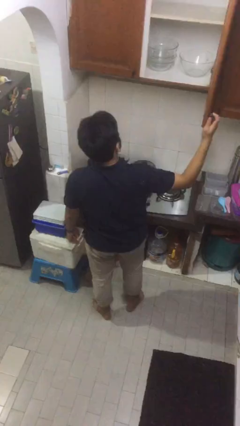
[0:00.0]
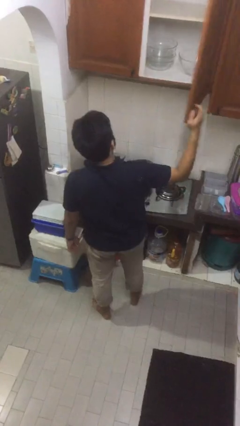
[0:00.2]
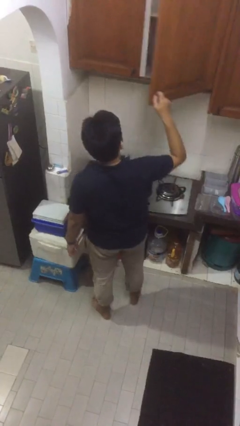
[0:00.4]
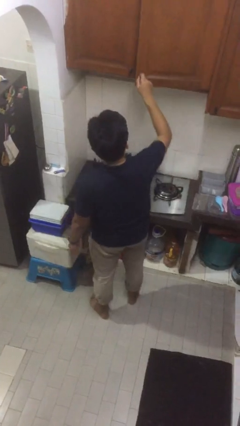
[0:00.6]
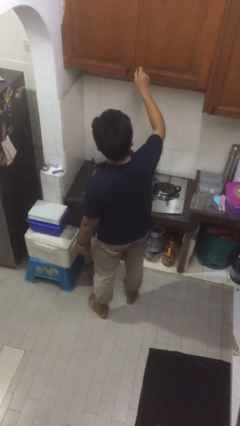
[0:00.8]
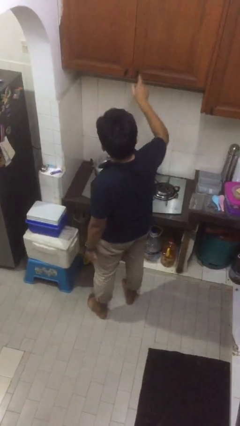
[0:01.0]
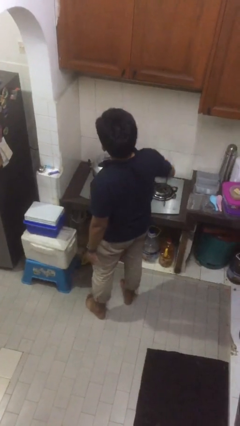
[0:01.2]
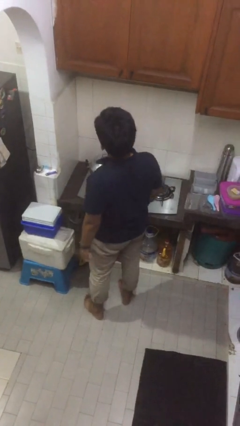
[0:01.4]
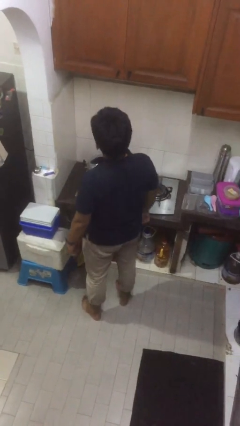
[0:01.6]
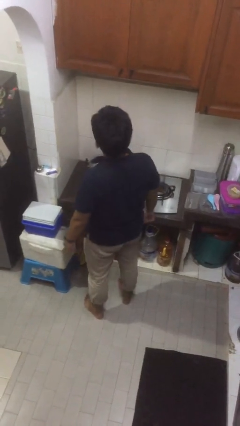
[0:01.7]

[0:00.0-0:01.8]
person closes cabinet

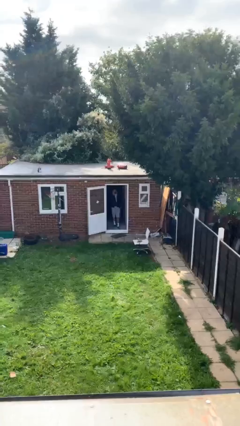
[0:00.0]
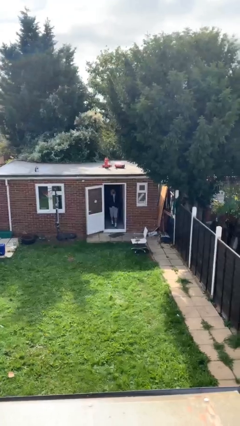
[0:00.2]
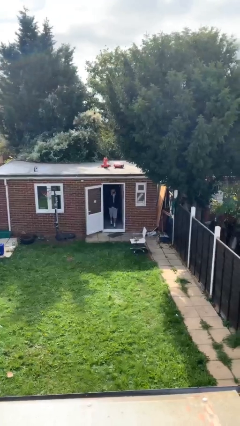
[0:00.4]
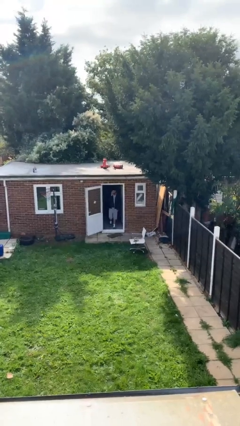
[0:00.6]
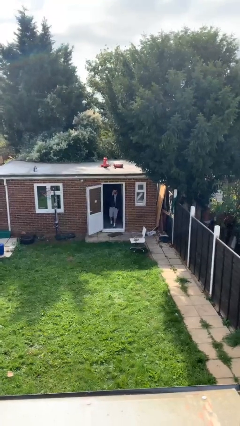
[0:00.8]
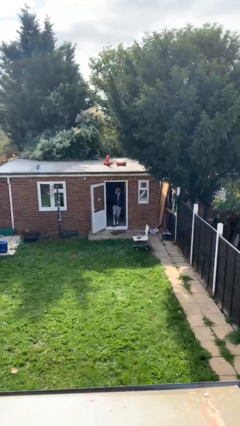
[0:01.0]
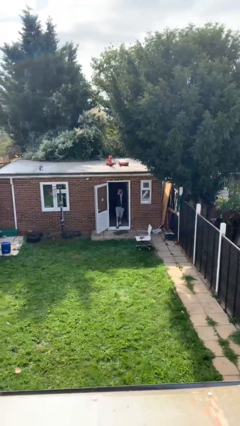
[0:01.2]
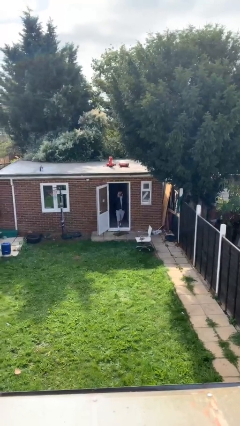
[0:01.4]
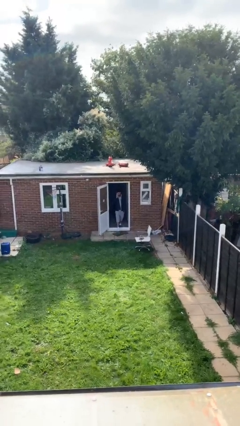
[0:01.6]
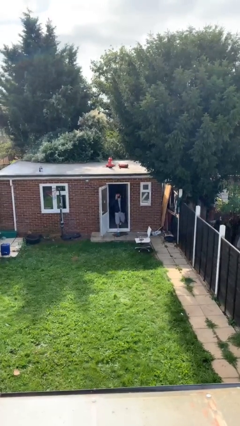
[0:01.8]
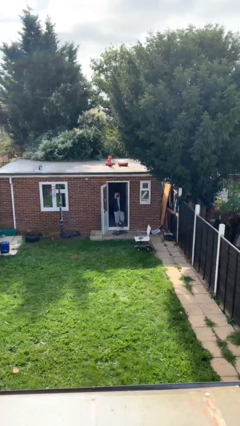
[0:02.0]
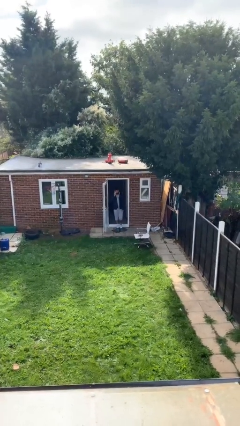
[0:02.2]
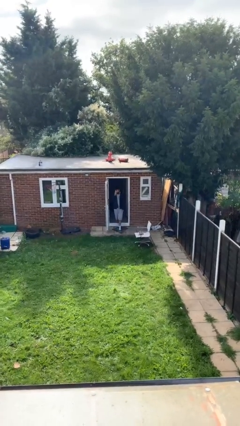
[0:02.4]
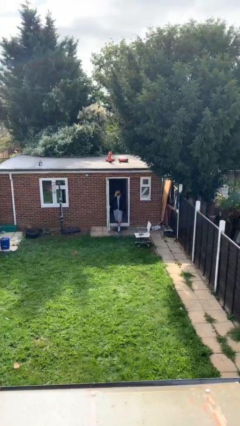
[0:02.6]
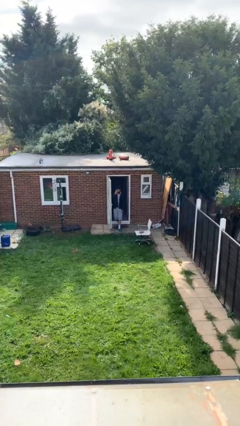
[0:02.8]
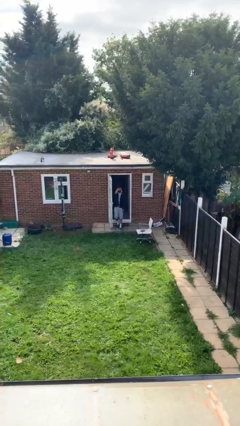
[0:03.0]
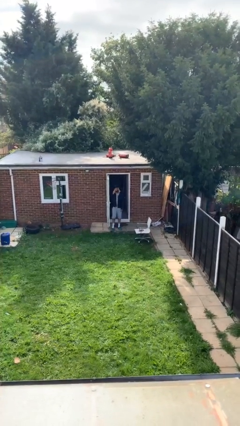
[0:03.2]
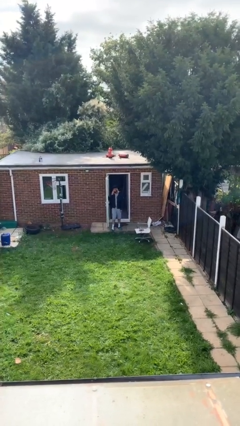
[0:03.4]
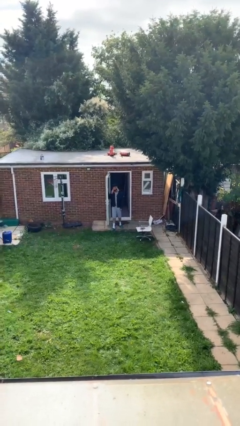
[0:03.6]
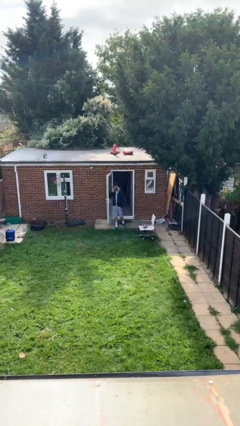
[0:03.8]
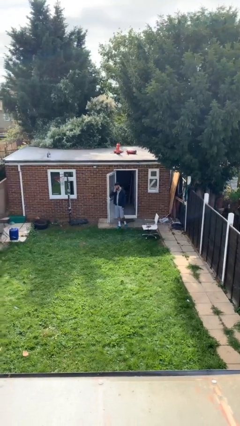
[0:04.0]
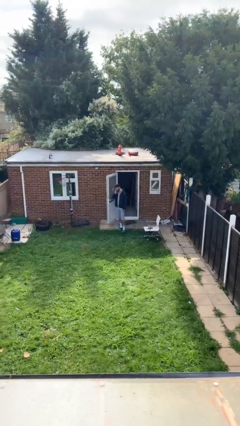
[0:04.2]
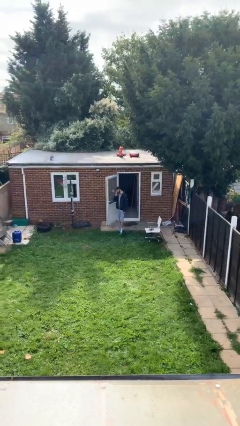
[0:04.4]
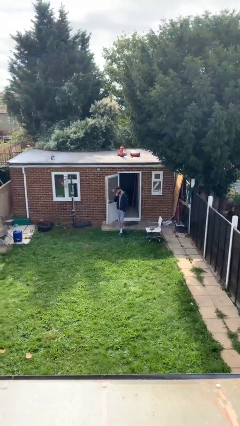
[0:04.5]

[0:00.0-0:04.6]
person enters scene through structure

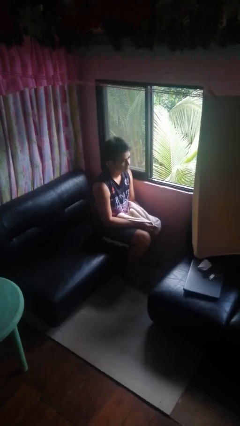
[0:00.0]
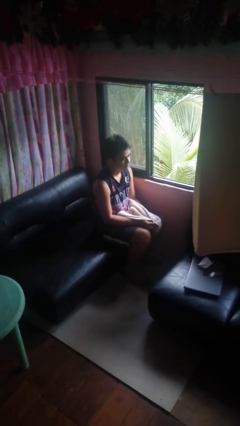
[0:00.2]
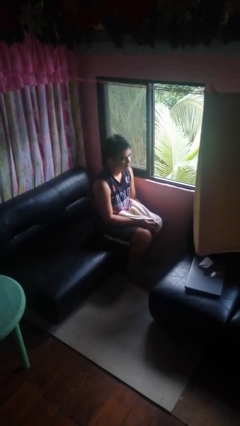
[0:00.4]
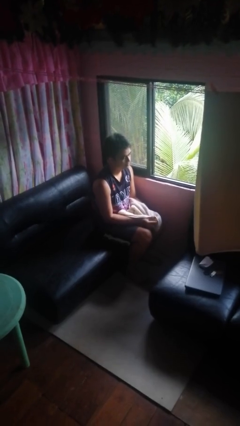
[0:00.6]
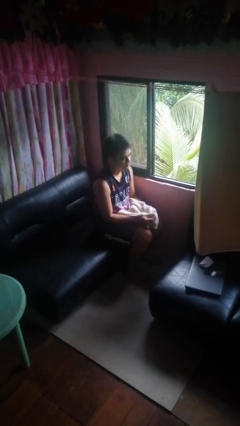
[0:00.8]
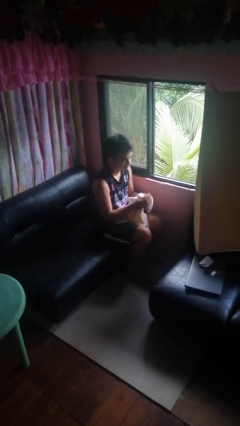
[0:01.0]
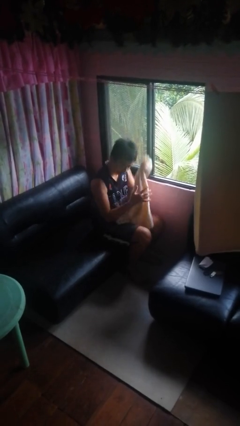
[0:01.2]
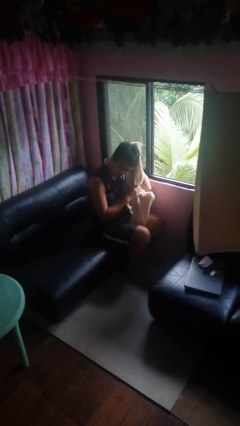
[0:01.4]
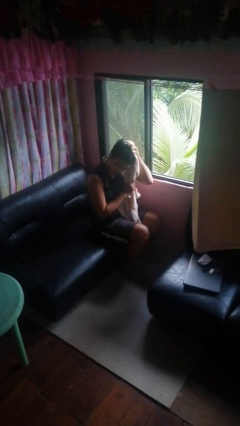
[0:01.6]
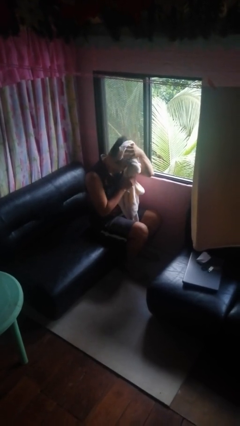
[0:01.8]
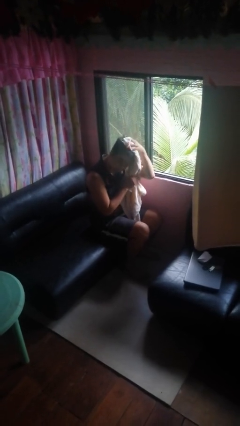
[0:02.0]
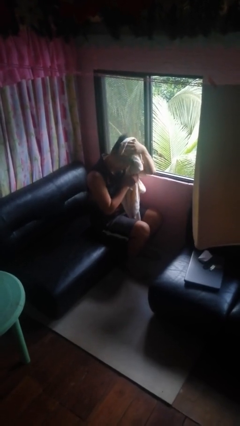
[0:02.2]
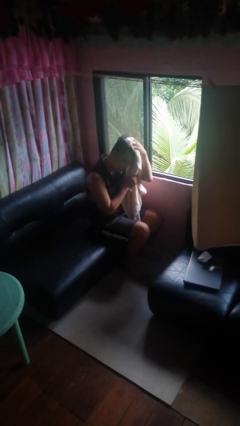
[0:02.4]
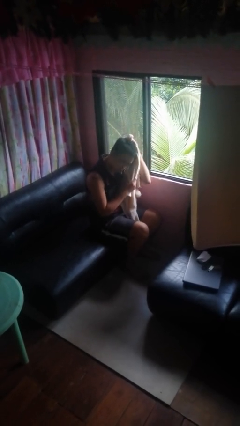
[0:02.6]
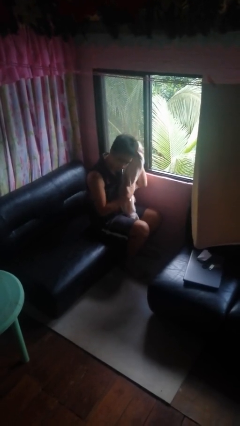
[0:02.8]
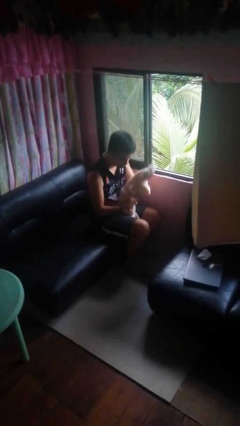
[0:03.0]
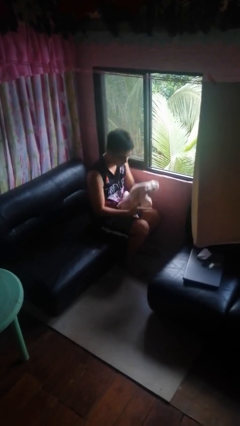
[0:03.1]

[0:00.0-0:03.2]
person dries hair with towel

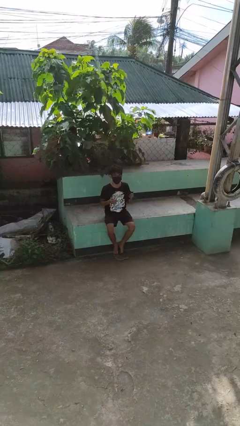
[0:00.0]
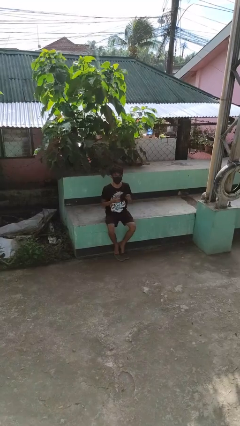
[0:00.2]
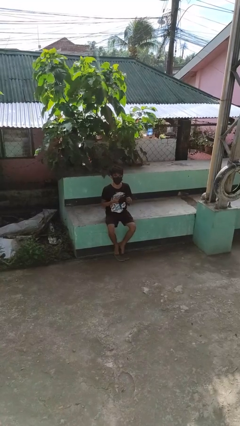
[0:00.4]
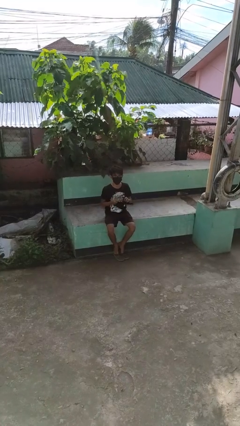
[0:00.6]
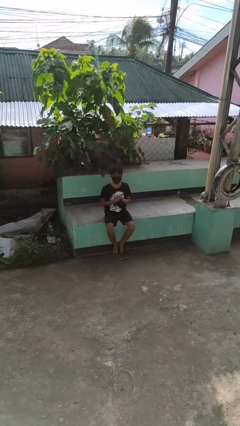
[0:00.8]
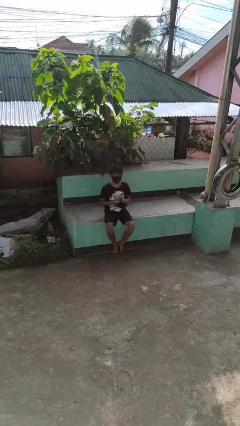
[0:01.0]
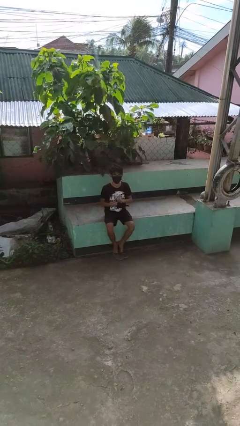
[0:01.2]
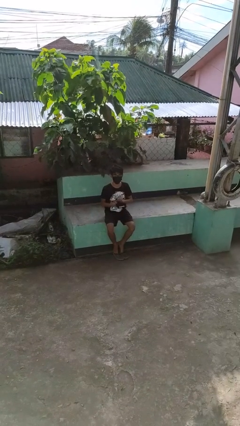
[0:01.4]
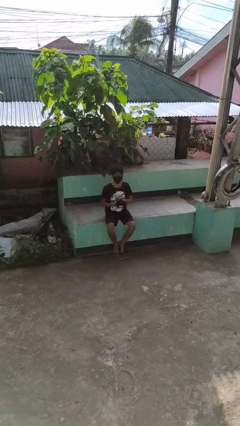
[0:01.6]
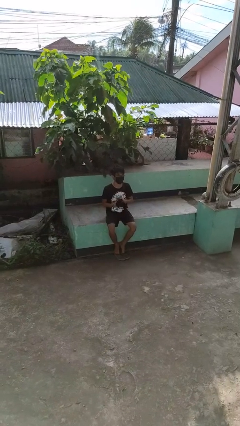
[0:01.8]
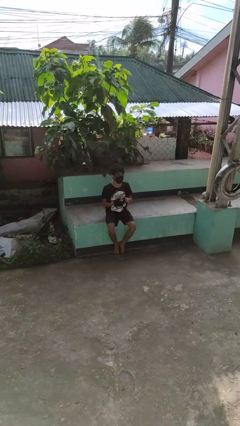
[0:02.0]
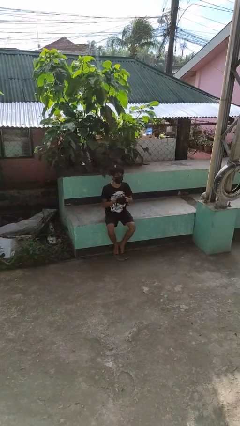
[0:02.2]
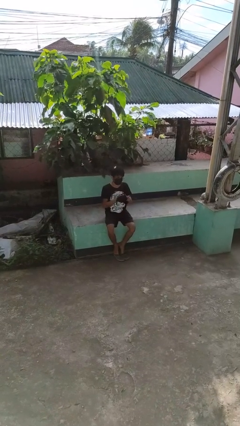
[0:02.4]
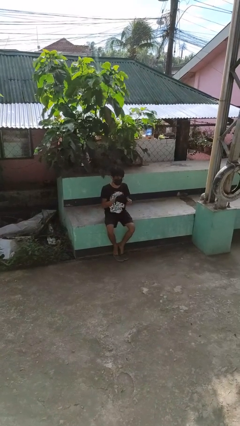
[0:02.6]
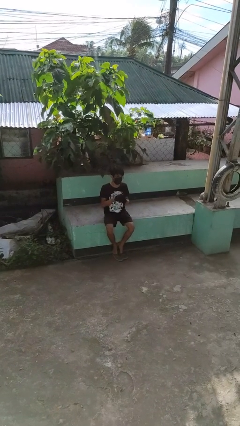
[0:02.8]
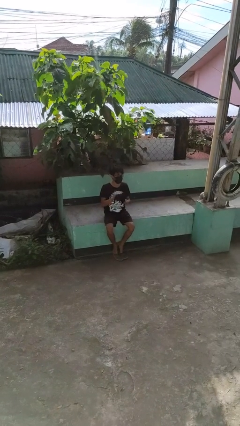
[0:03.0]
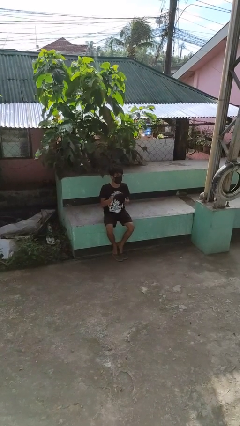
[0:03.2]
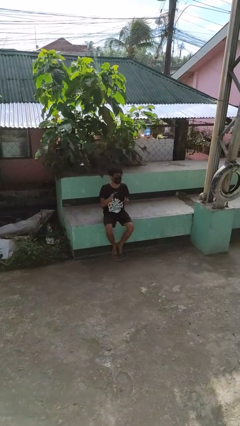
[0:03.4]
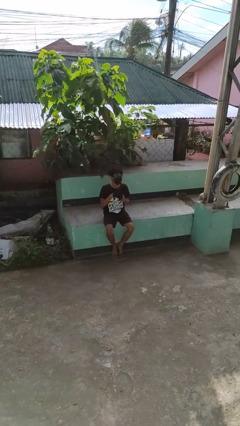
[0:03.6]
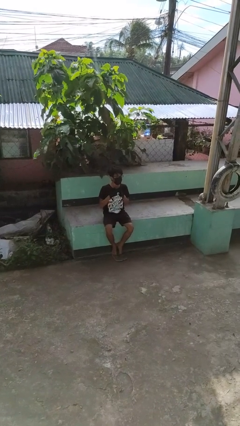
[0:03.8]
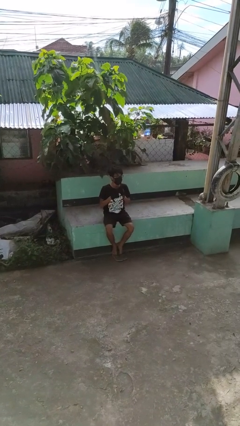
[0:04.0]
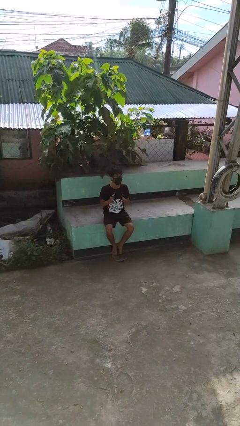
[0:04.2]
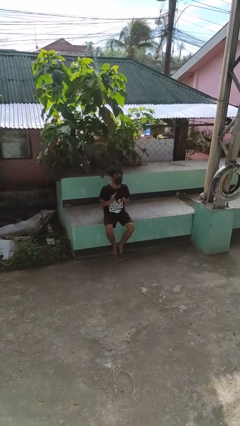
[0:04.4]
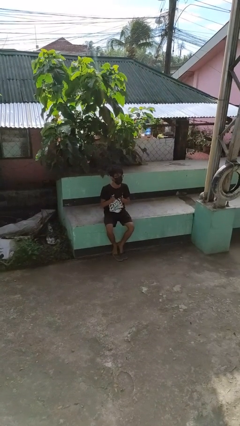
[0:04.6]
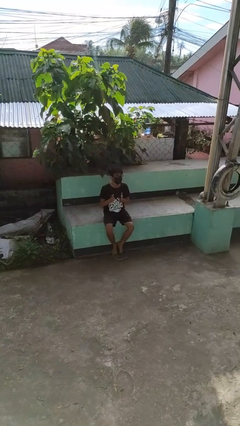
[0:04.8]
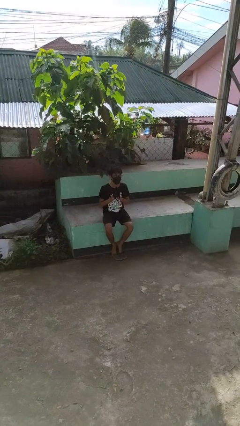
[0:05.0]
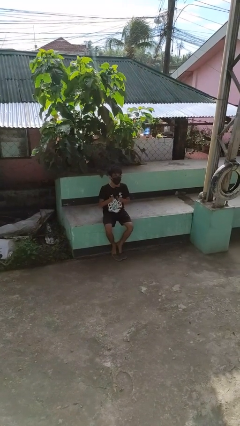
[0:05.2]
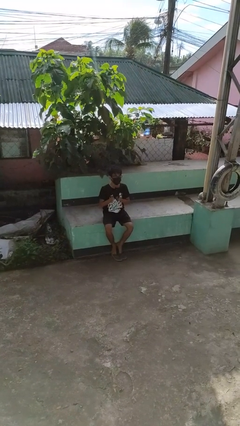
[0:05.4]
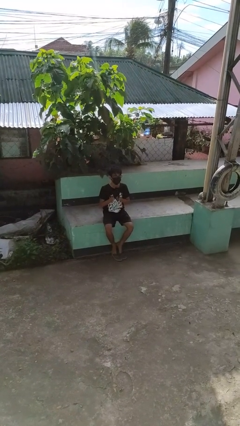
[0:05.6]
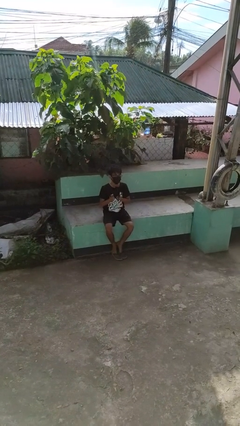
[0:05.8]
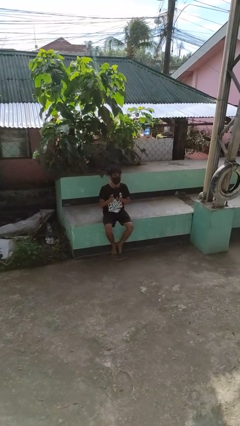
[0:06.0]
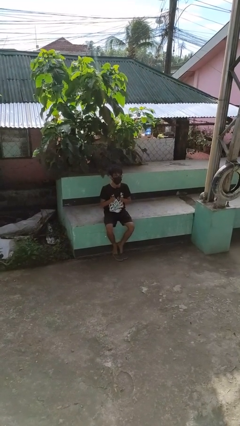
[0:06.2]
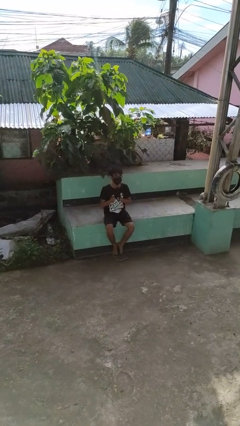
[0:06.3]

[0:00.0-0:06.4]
person puts on gloves

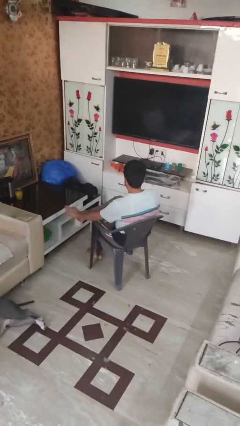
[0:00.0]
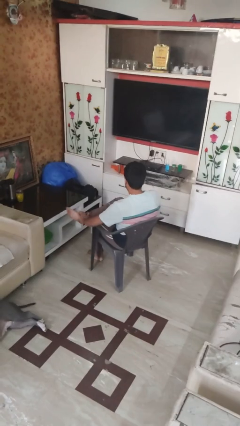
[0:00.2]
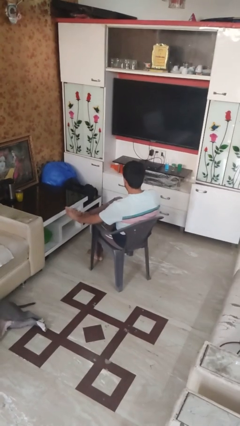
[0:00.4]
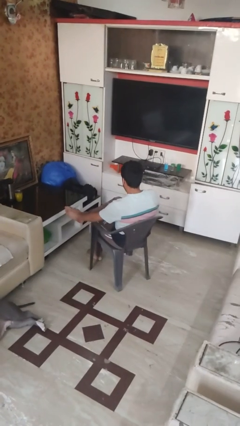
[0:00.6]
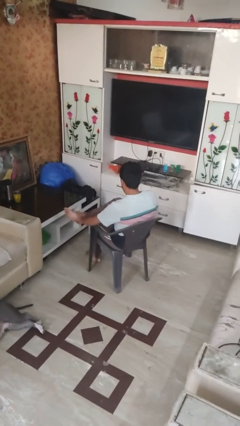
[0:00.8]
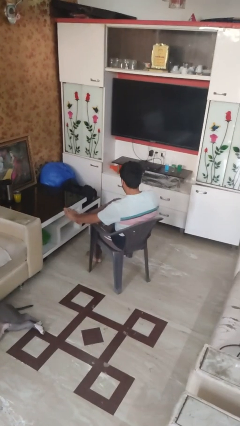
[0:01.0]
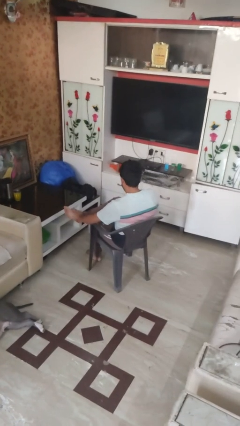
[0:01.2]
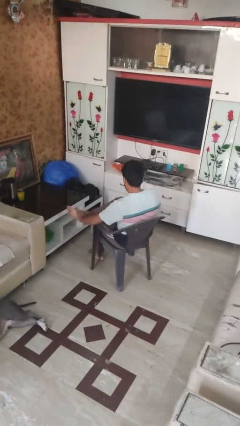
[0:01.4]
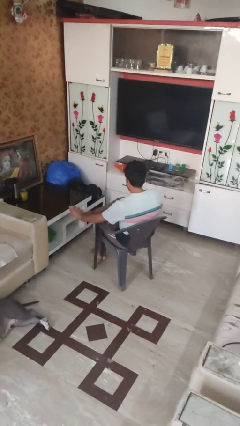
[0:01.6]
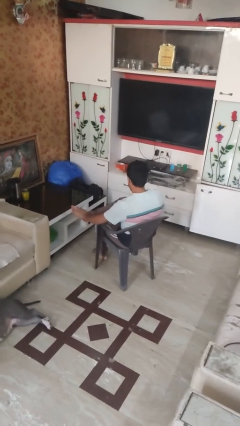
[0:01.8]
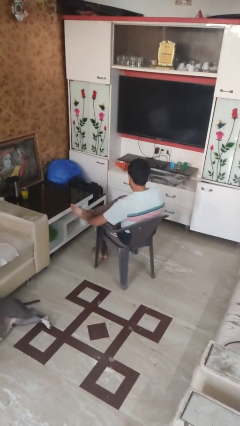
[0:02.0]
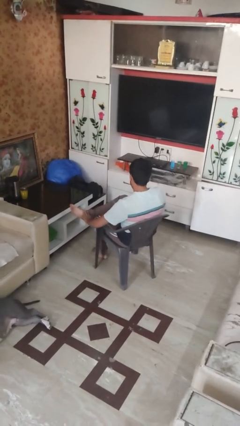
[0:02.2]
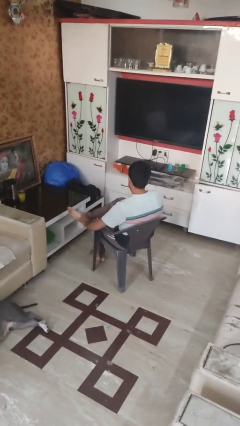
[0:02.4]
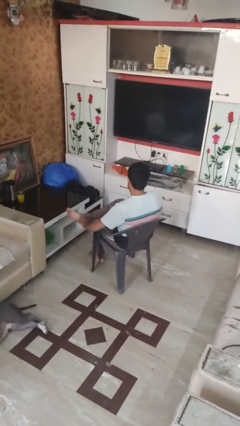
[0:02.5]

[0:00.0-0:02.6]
person rubs foot
